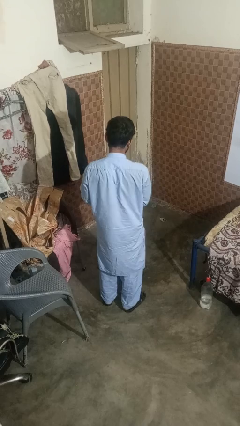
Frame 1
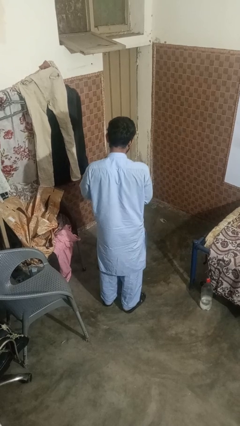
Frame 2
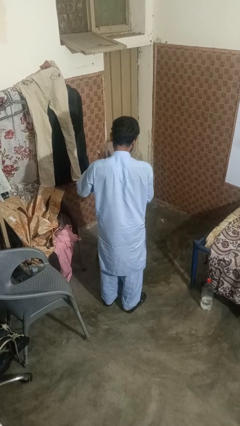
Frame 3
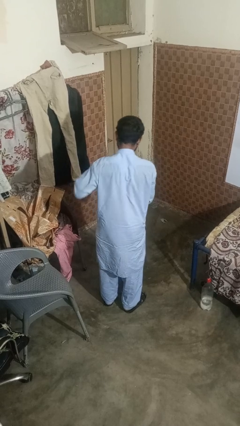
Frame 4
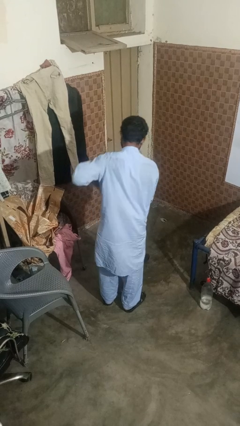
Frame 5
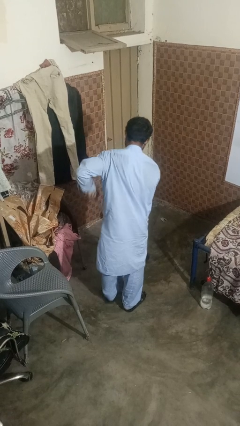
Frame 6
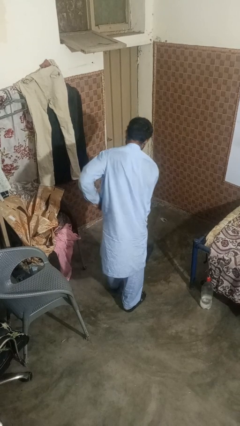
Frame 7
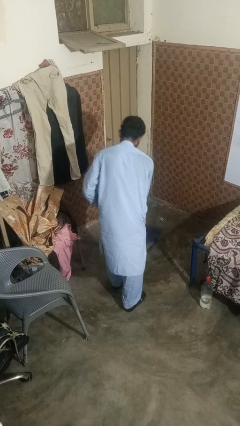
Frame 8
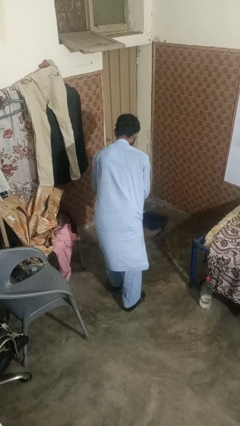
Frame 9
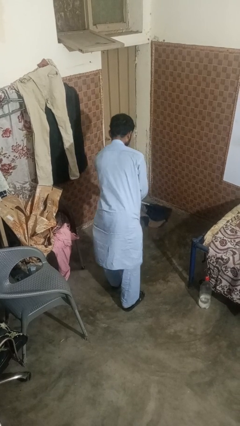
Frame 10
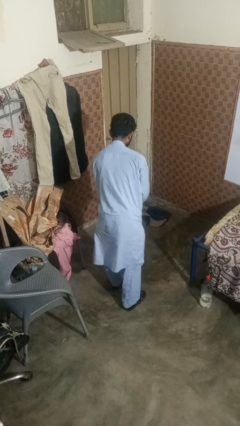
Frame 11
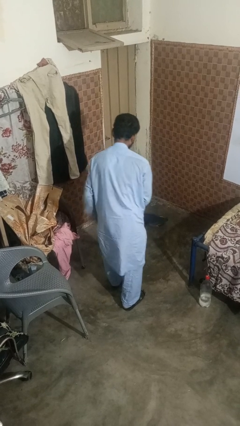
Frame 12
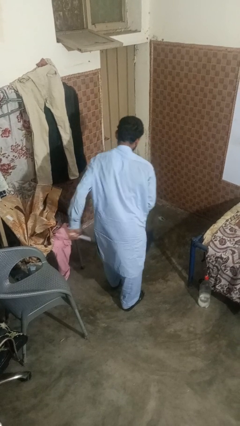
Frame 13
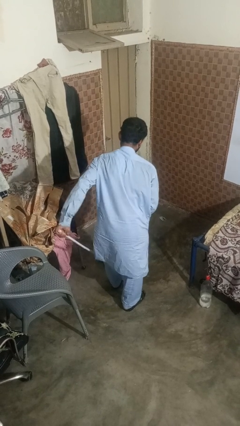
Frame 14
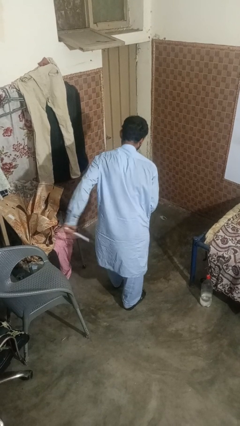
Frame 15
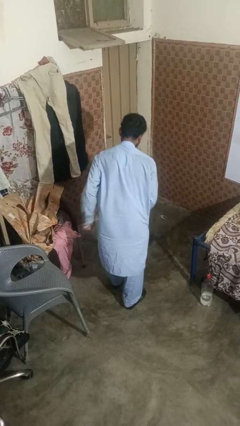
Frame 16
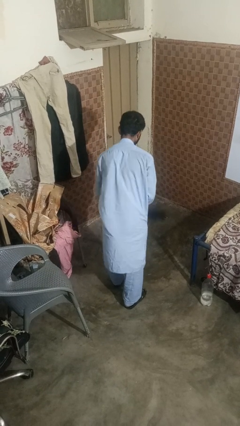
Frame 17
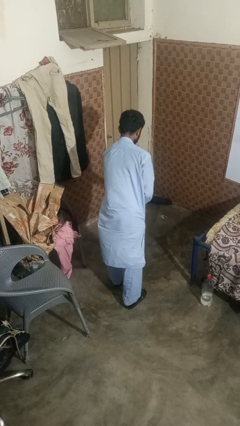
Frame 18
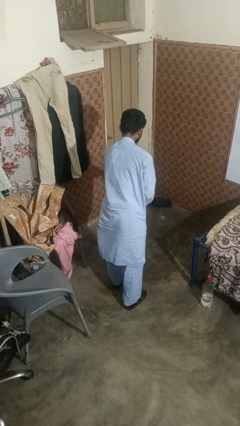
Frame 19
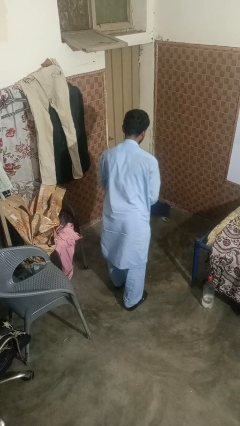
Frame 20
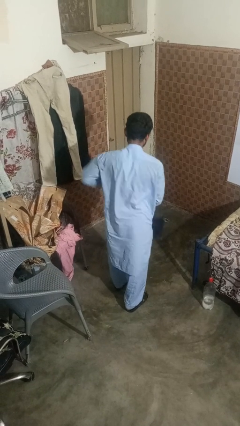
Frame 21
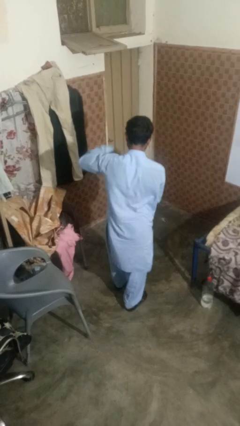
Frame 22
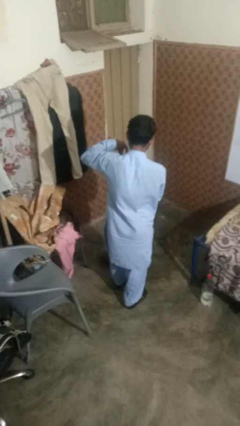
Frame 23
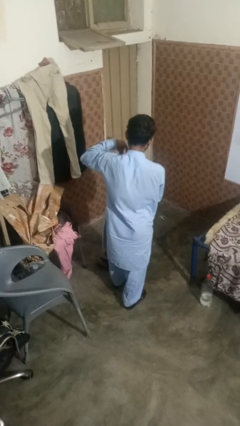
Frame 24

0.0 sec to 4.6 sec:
person mops

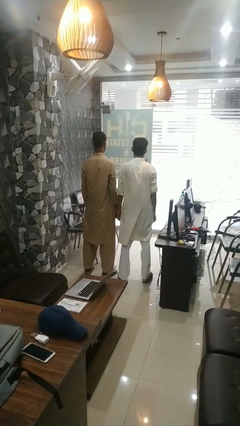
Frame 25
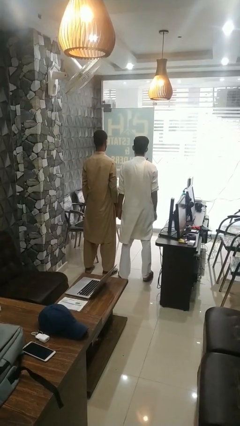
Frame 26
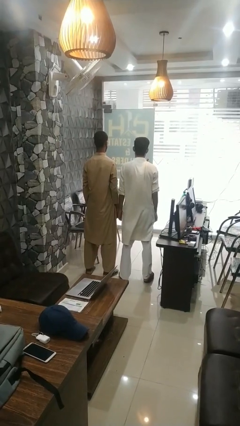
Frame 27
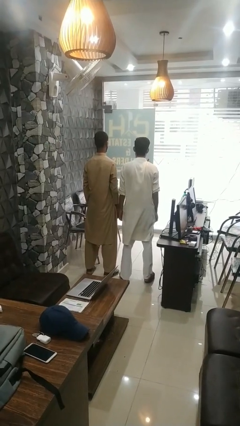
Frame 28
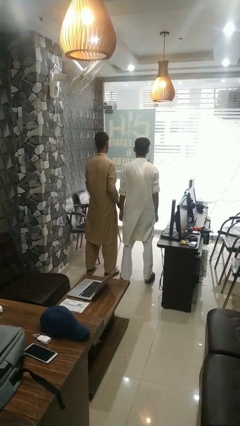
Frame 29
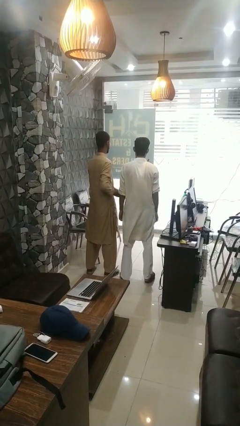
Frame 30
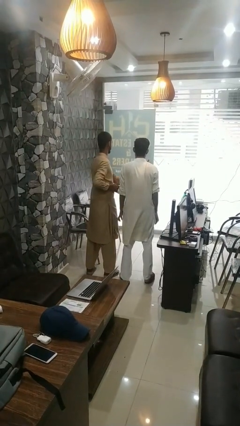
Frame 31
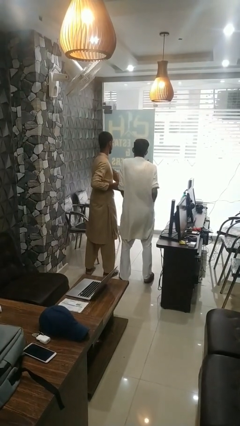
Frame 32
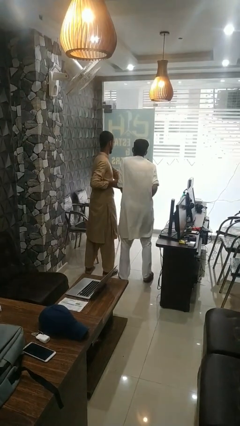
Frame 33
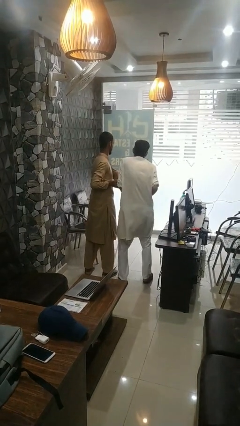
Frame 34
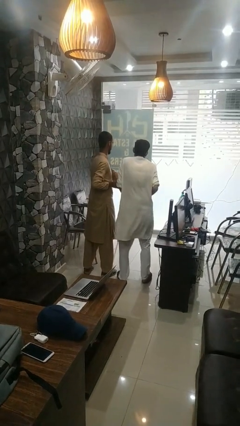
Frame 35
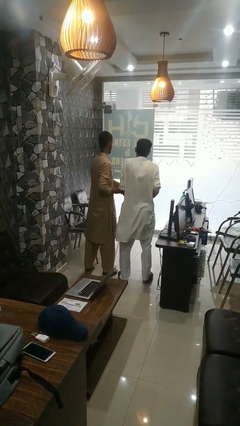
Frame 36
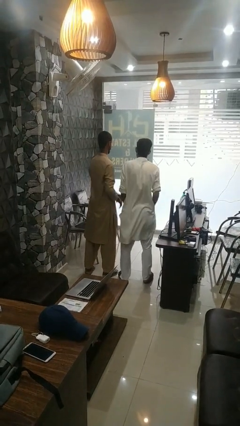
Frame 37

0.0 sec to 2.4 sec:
person tickles person

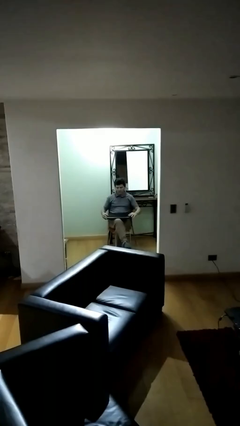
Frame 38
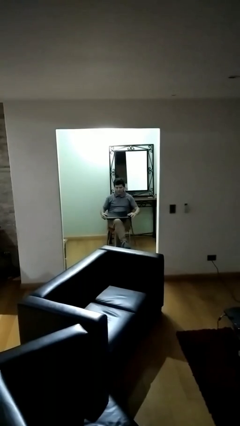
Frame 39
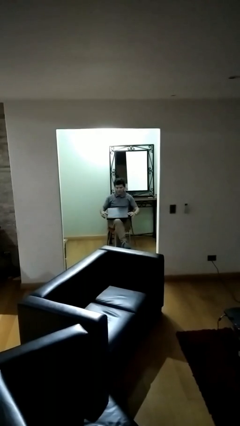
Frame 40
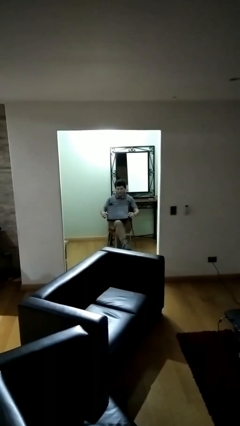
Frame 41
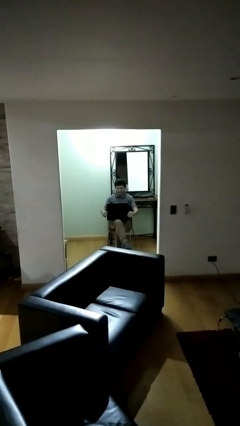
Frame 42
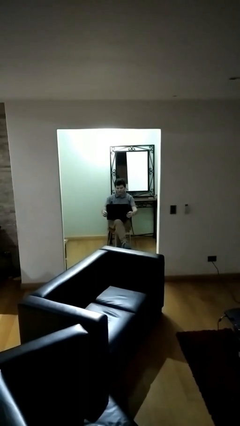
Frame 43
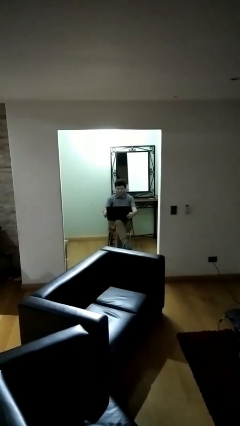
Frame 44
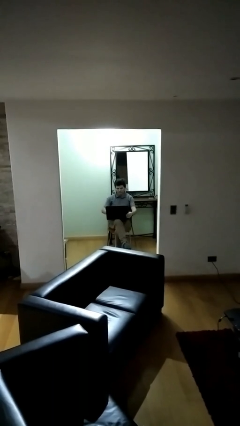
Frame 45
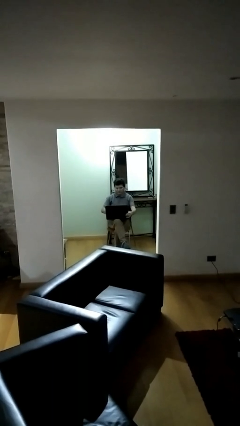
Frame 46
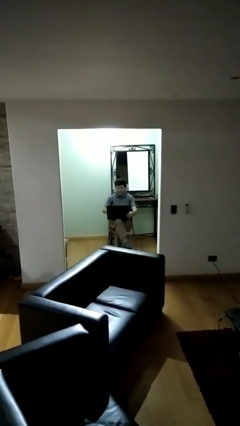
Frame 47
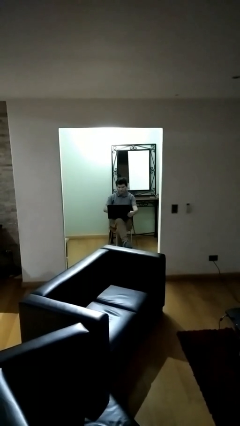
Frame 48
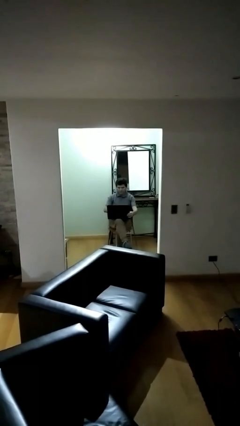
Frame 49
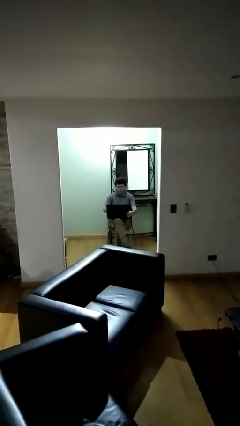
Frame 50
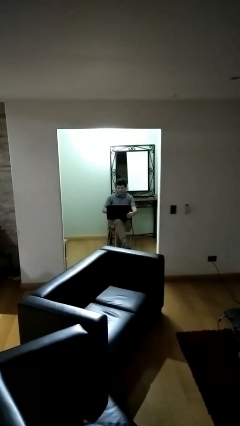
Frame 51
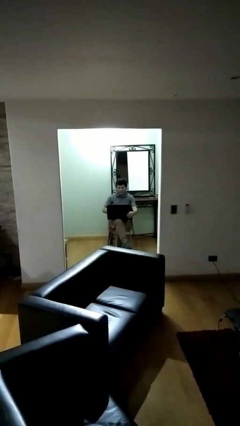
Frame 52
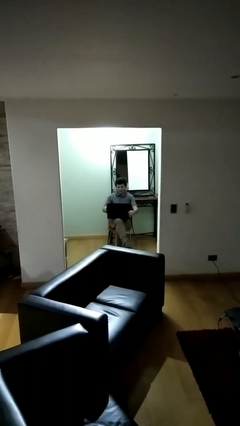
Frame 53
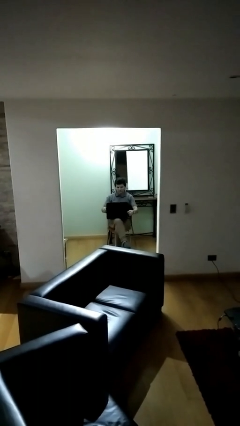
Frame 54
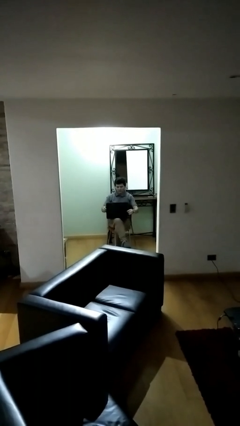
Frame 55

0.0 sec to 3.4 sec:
person interacts with laptop

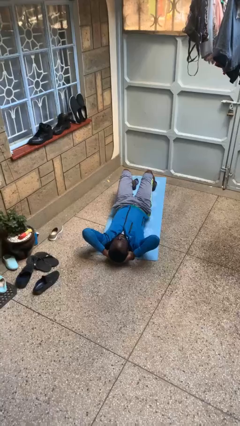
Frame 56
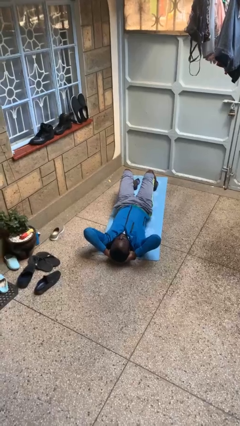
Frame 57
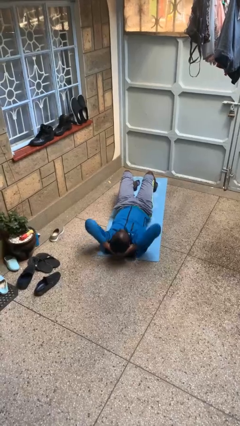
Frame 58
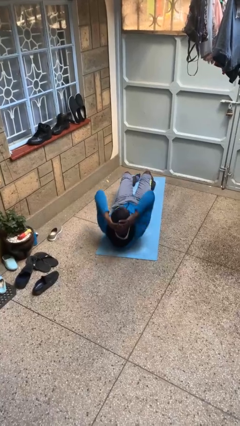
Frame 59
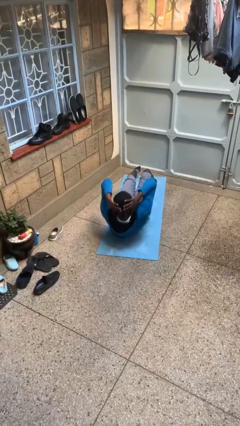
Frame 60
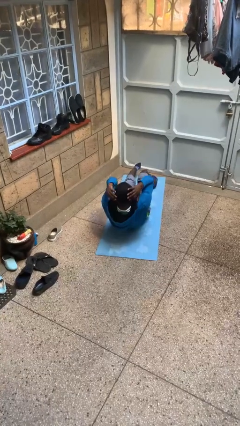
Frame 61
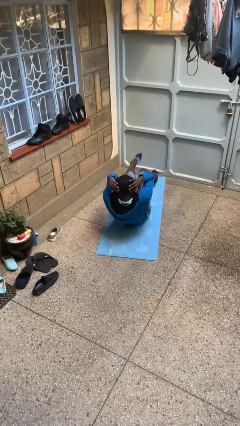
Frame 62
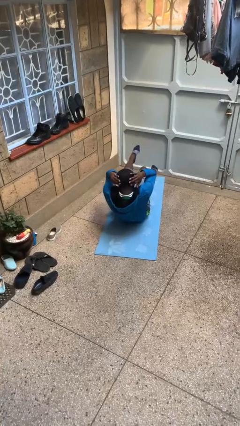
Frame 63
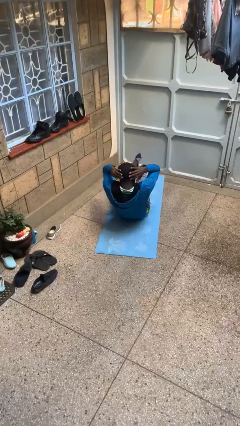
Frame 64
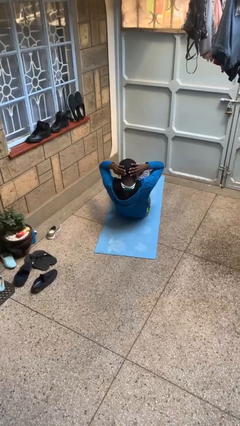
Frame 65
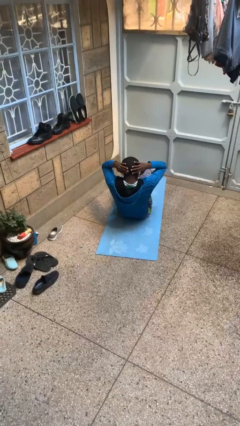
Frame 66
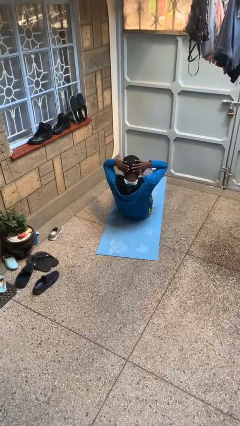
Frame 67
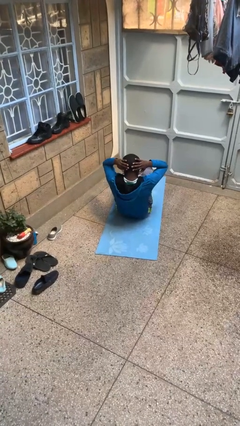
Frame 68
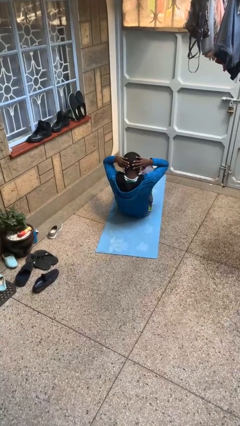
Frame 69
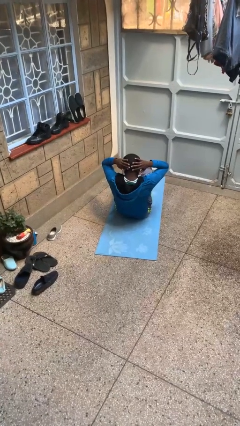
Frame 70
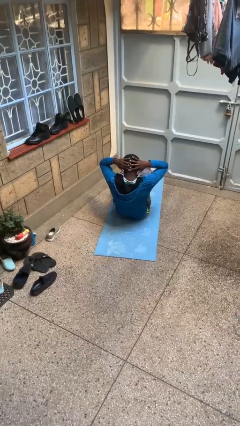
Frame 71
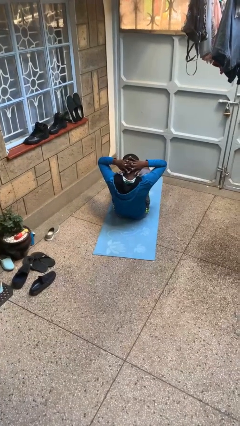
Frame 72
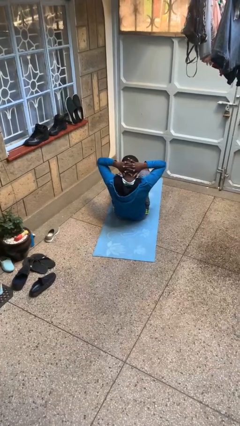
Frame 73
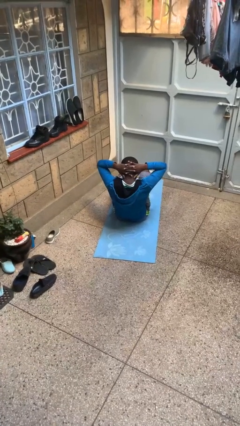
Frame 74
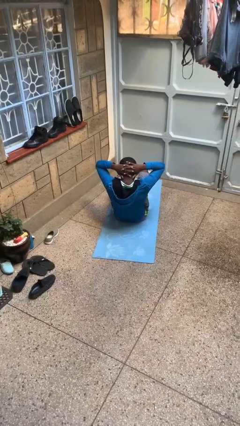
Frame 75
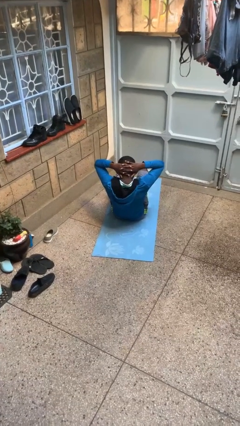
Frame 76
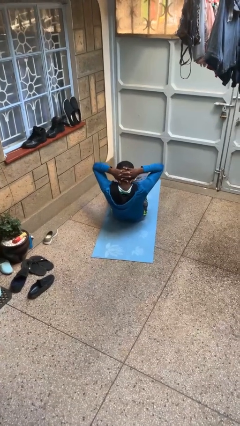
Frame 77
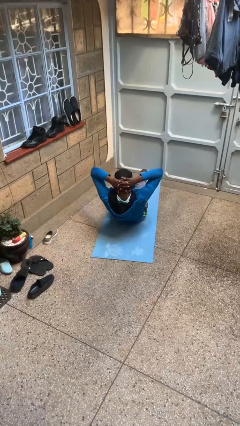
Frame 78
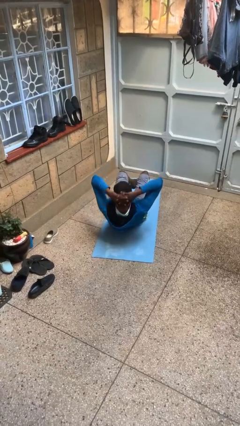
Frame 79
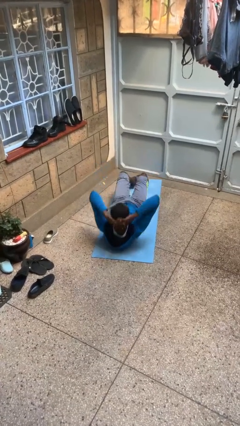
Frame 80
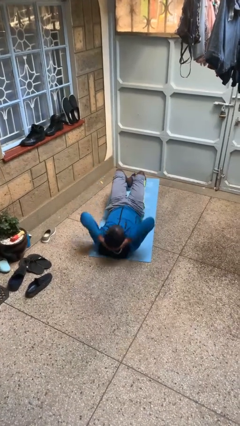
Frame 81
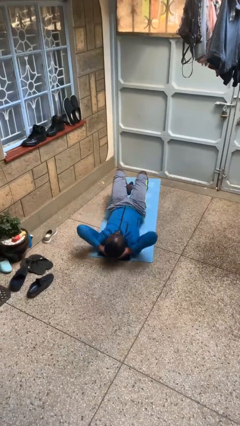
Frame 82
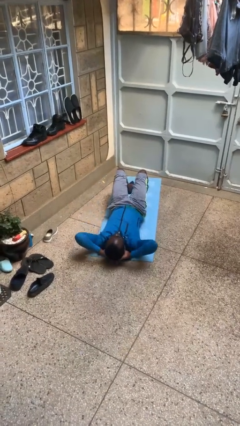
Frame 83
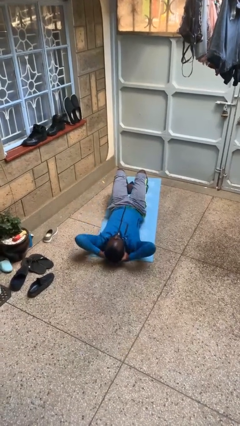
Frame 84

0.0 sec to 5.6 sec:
person exercises with situp

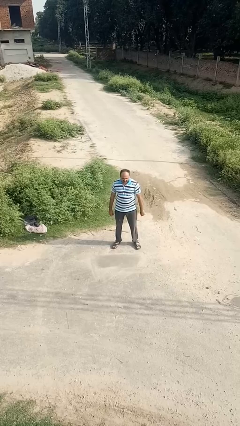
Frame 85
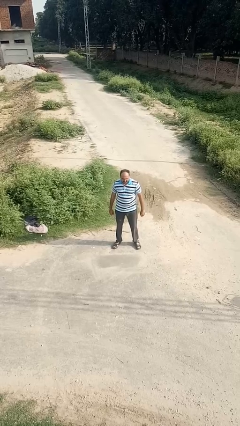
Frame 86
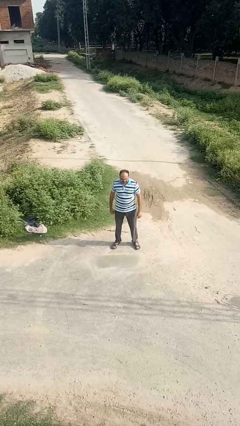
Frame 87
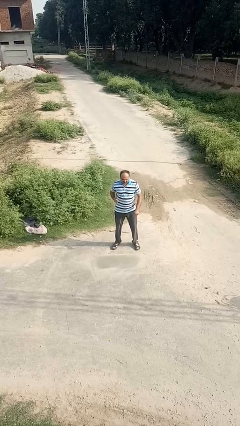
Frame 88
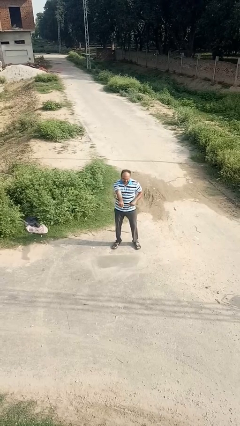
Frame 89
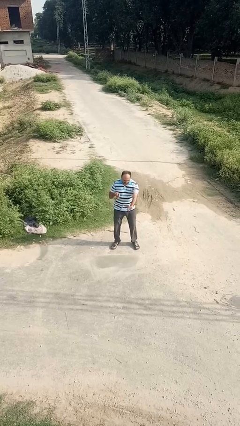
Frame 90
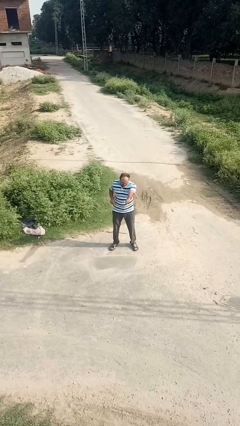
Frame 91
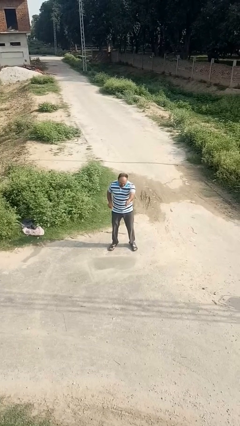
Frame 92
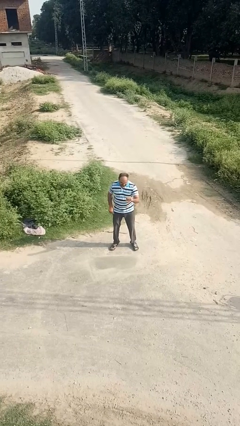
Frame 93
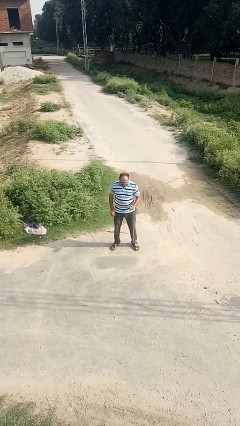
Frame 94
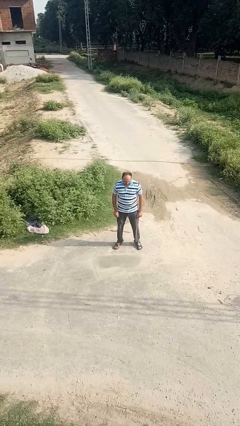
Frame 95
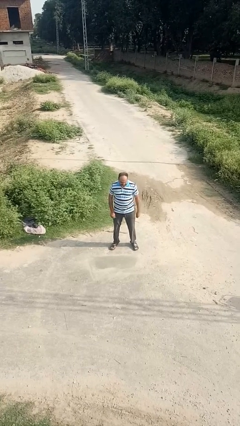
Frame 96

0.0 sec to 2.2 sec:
person punches
